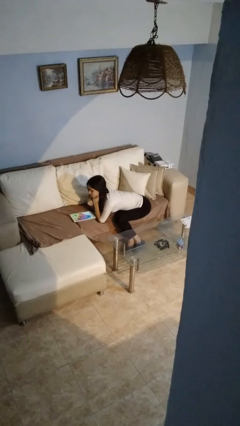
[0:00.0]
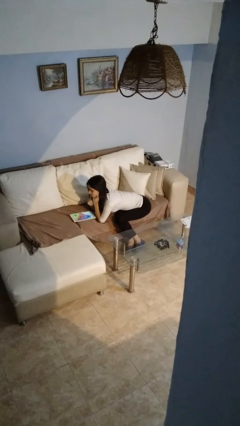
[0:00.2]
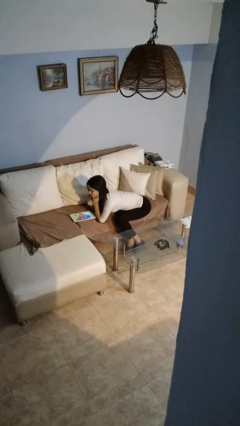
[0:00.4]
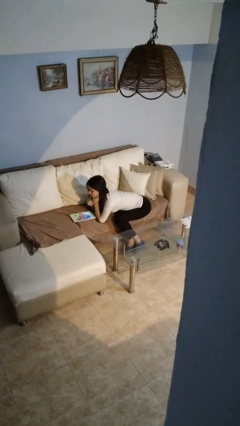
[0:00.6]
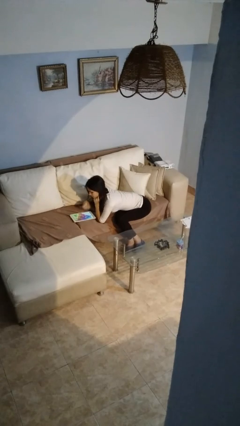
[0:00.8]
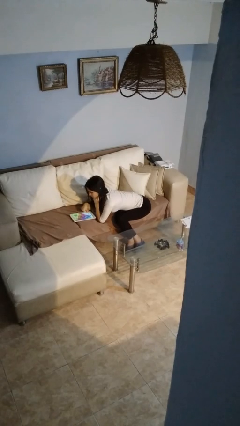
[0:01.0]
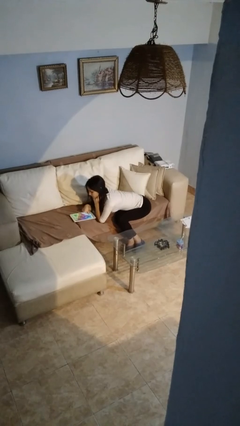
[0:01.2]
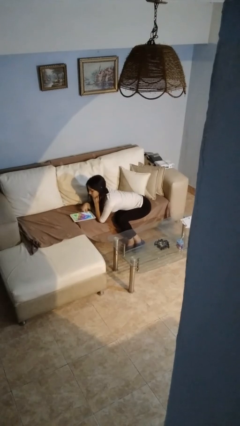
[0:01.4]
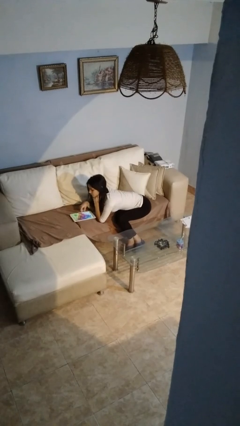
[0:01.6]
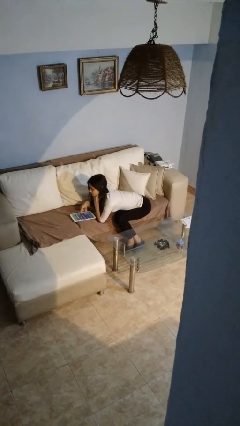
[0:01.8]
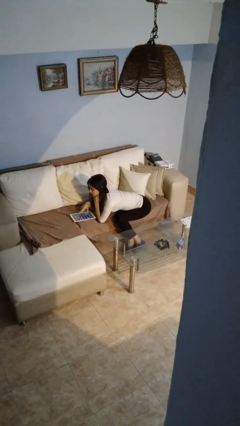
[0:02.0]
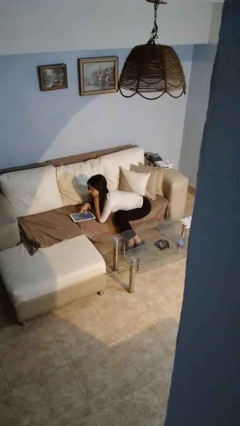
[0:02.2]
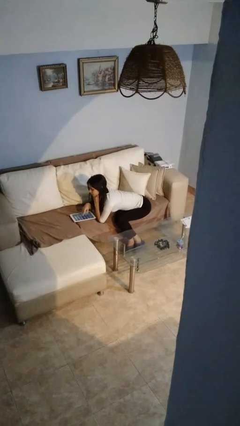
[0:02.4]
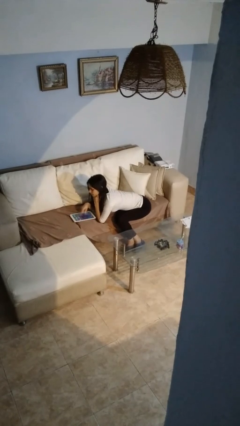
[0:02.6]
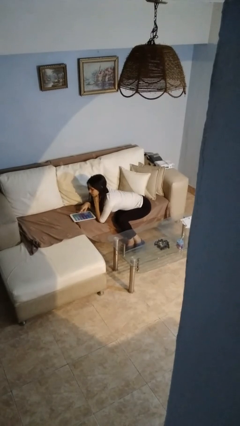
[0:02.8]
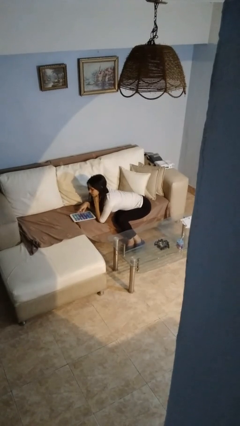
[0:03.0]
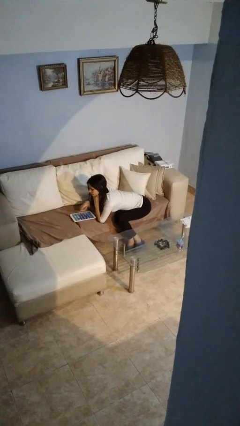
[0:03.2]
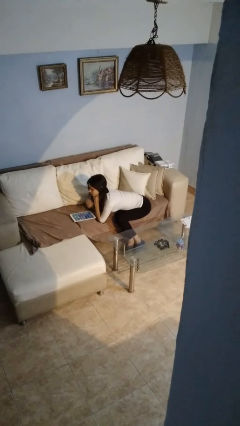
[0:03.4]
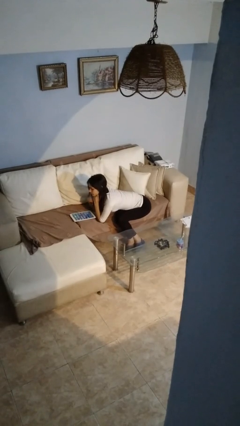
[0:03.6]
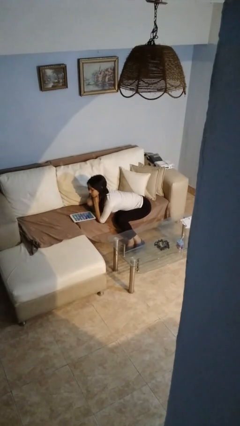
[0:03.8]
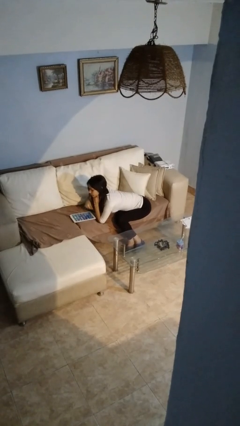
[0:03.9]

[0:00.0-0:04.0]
person interacts with tablet

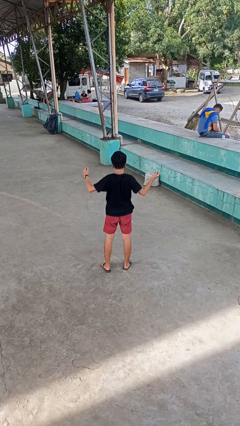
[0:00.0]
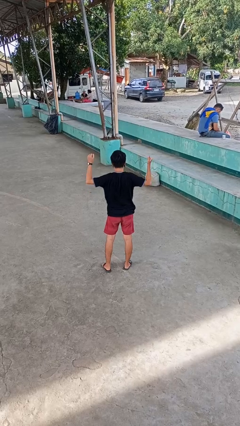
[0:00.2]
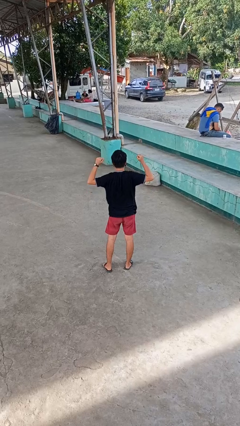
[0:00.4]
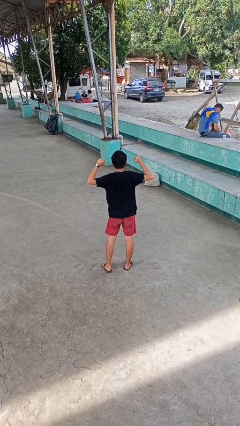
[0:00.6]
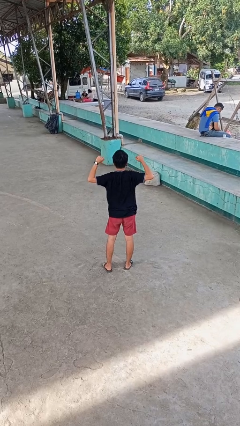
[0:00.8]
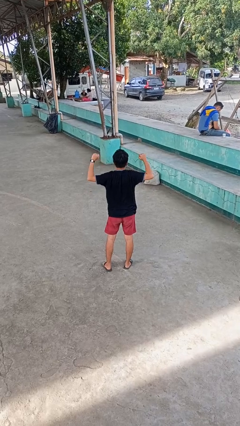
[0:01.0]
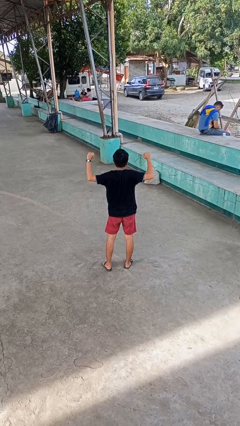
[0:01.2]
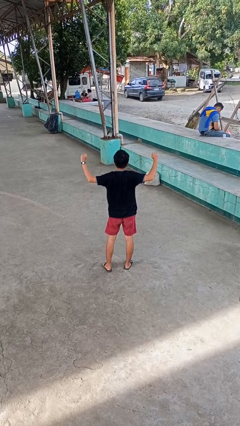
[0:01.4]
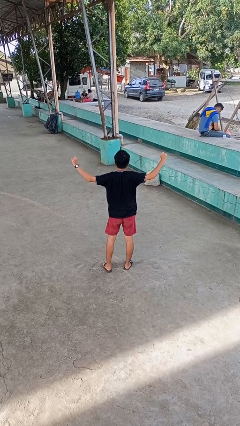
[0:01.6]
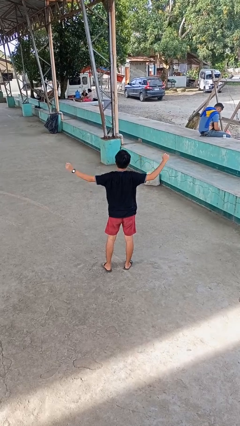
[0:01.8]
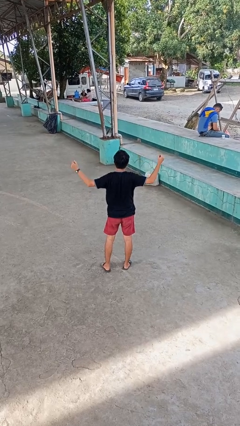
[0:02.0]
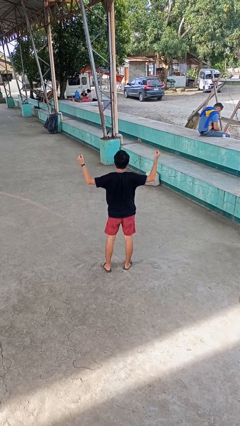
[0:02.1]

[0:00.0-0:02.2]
person stretches arms to side

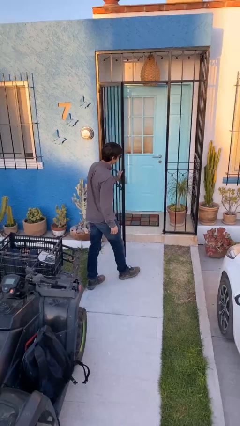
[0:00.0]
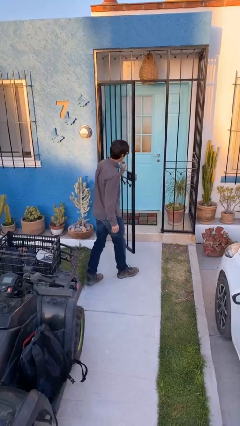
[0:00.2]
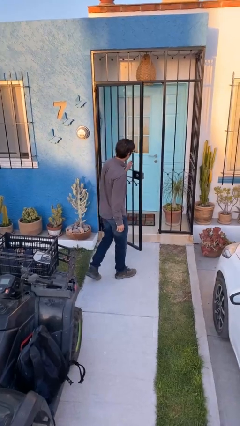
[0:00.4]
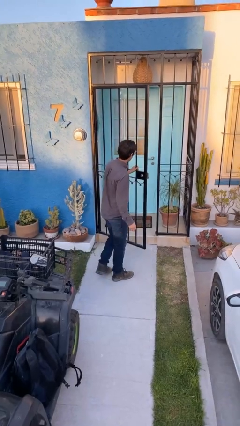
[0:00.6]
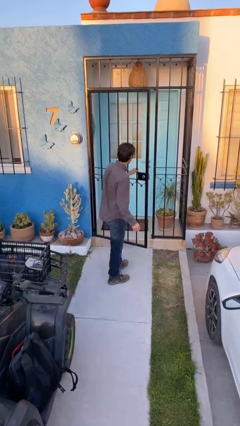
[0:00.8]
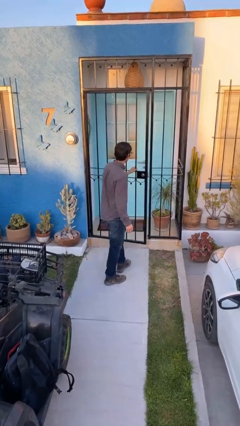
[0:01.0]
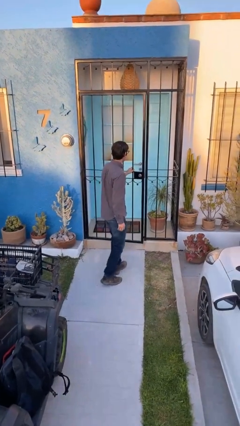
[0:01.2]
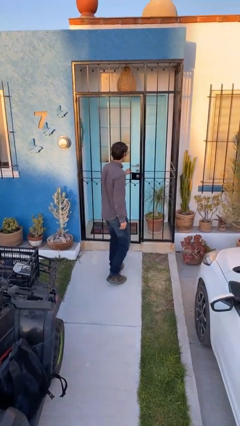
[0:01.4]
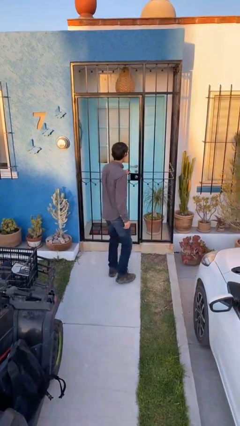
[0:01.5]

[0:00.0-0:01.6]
person closes facility door

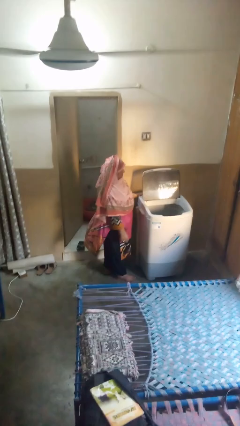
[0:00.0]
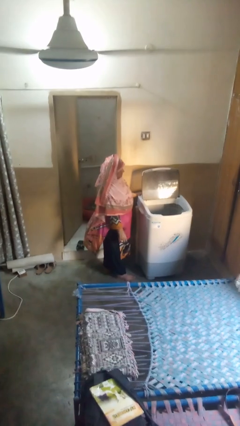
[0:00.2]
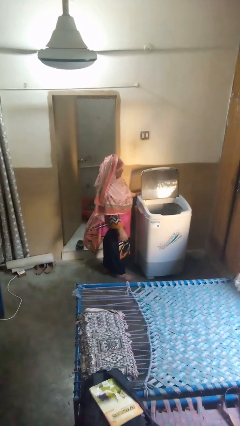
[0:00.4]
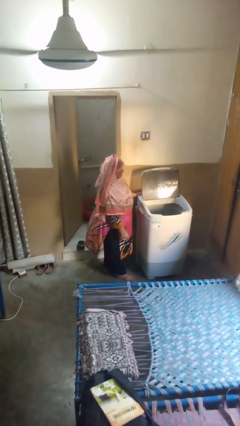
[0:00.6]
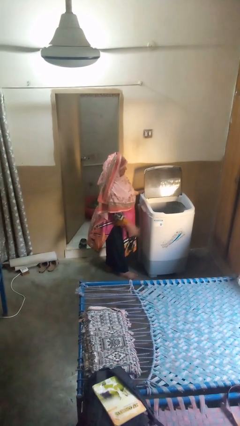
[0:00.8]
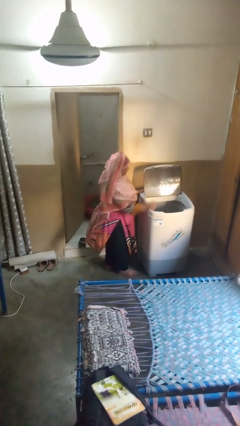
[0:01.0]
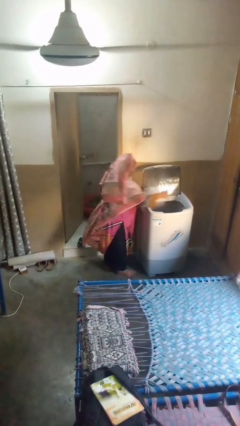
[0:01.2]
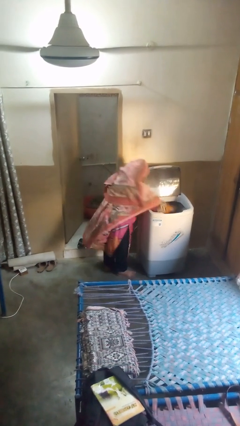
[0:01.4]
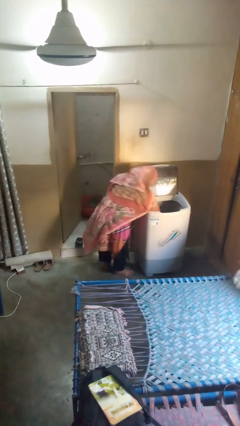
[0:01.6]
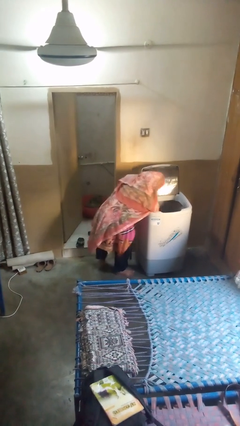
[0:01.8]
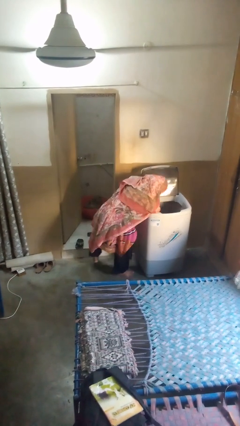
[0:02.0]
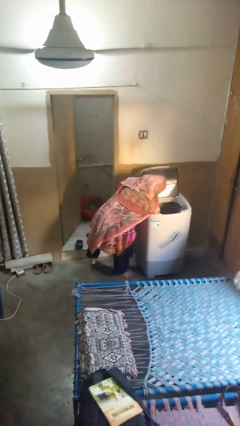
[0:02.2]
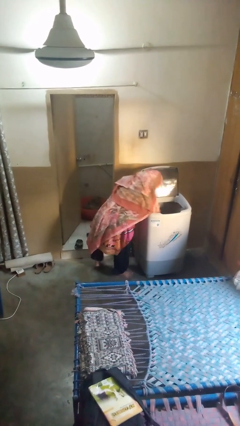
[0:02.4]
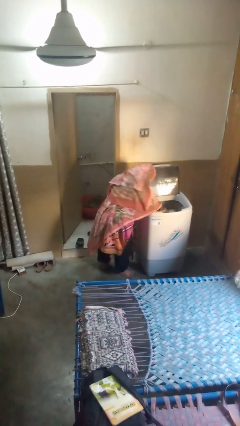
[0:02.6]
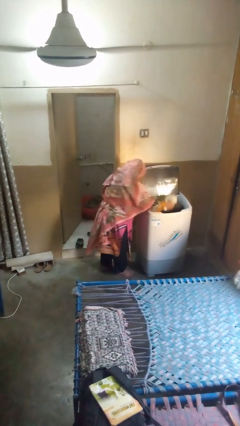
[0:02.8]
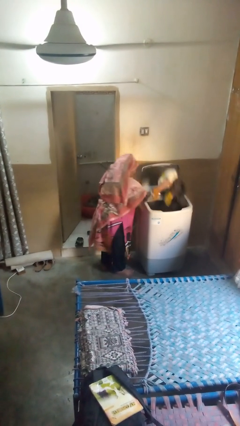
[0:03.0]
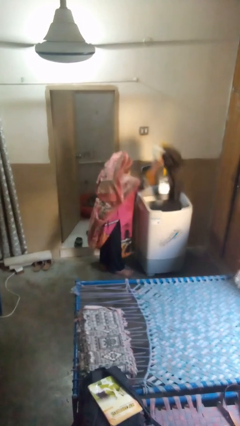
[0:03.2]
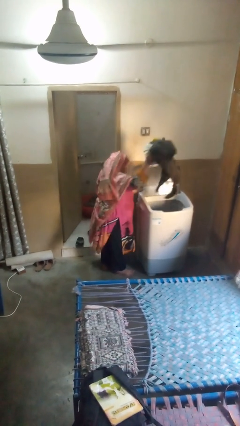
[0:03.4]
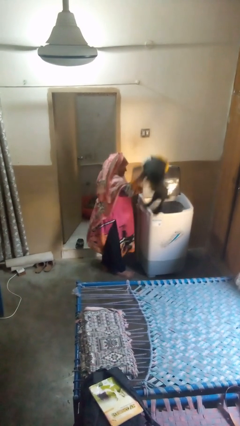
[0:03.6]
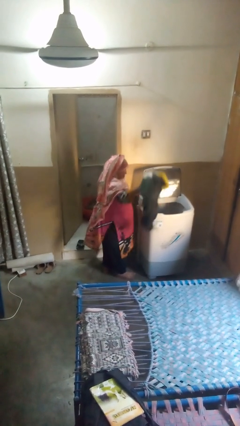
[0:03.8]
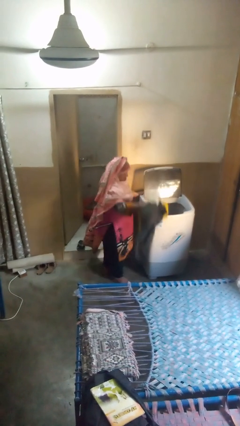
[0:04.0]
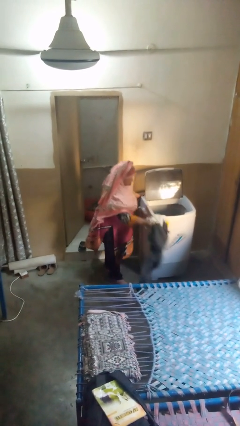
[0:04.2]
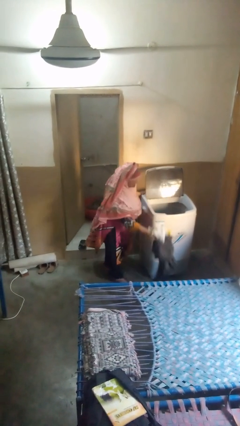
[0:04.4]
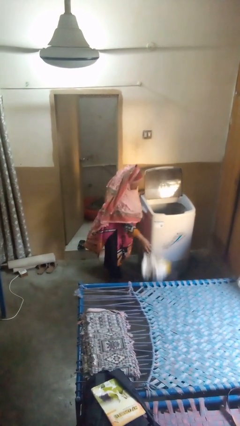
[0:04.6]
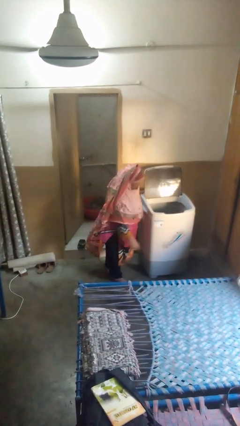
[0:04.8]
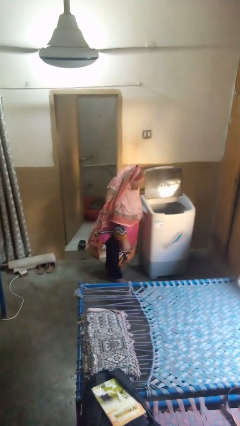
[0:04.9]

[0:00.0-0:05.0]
person unloads clotheswasher

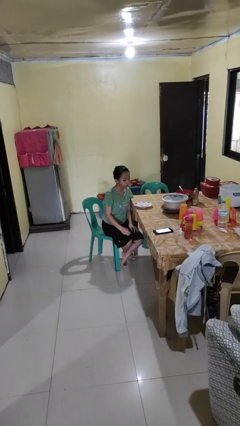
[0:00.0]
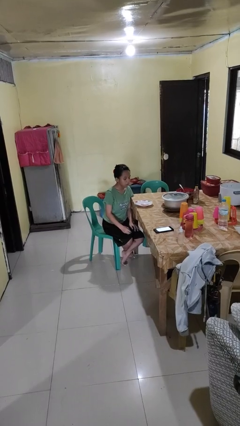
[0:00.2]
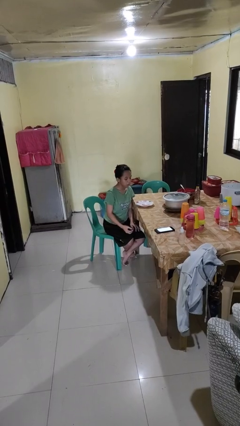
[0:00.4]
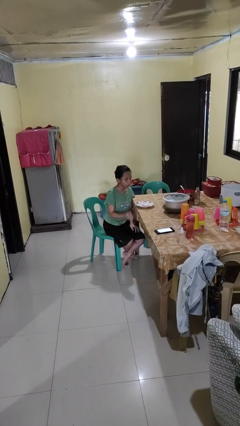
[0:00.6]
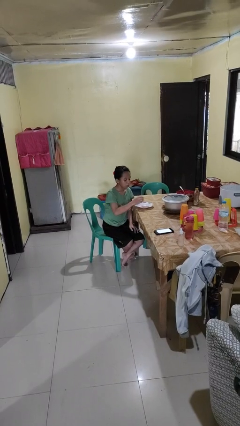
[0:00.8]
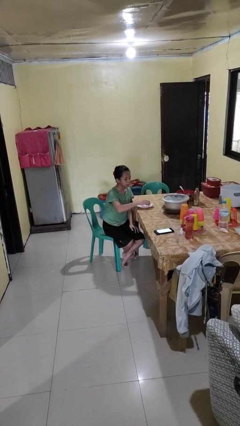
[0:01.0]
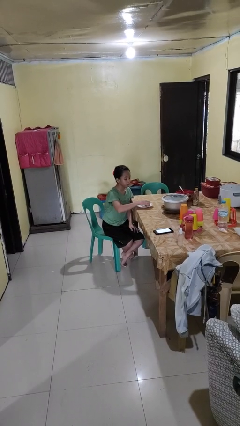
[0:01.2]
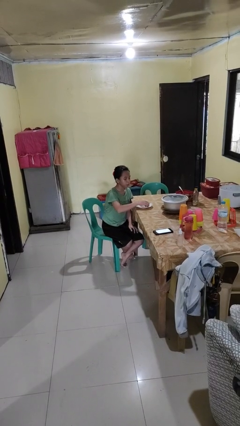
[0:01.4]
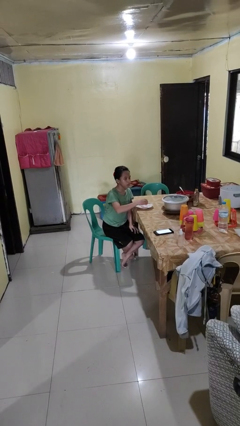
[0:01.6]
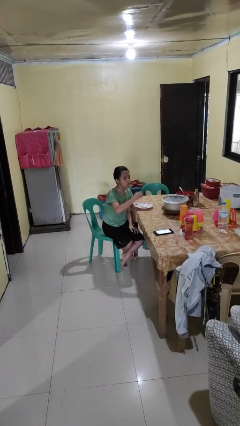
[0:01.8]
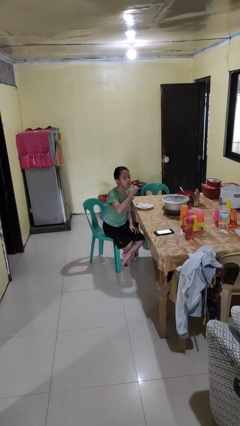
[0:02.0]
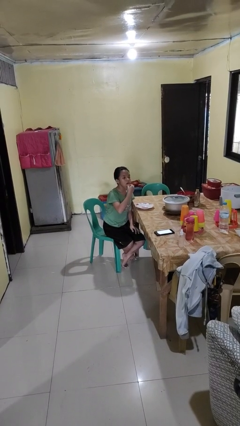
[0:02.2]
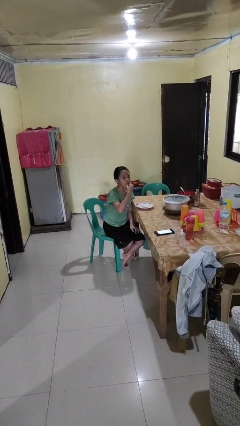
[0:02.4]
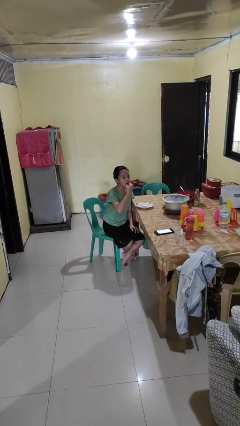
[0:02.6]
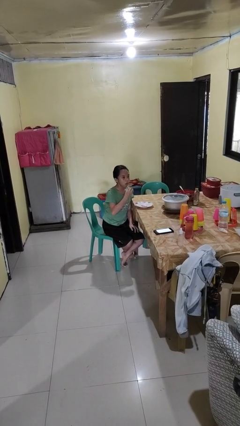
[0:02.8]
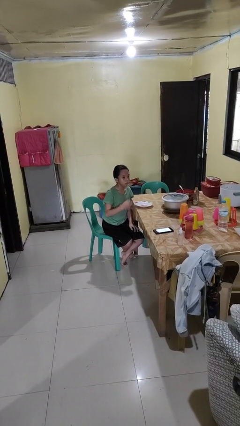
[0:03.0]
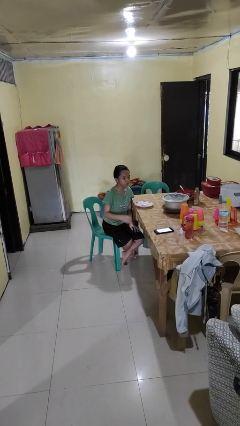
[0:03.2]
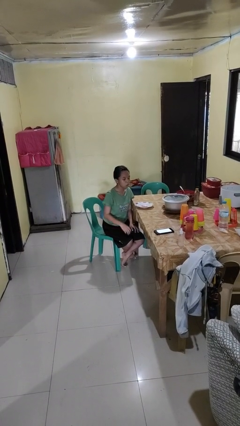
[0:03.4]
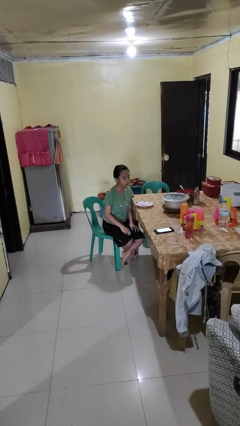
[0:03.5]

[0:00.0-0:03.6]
person eats with hands

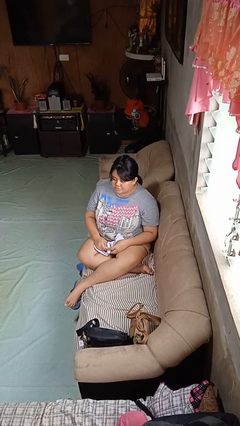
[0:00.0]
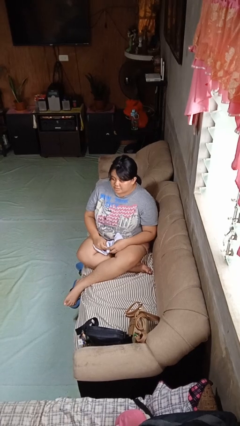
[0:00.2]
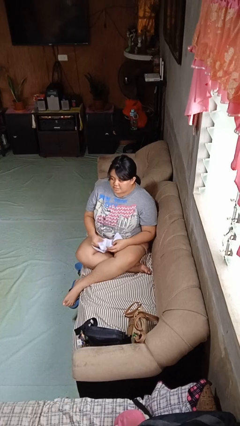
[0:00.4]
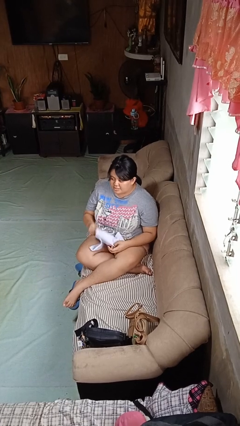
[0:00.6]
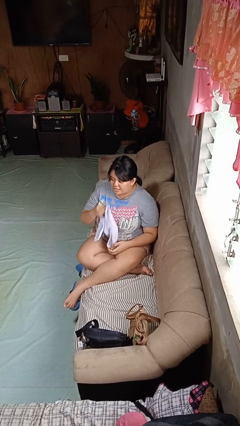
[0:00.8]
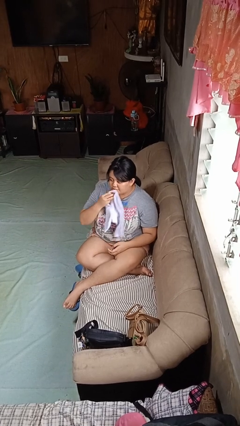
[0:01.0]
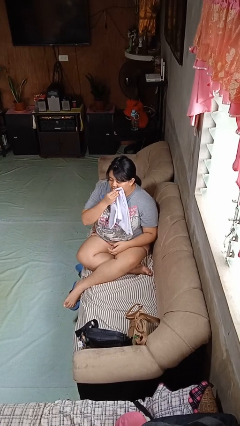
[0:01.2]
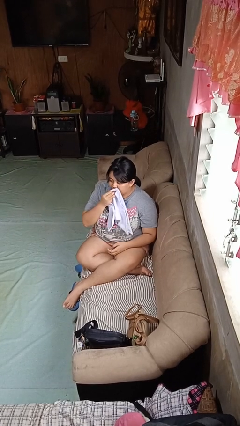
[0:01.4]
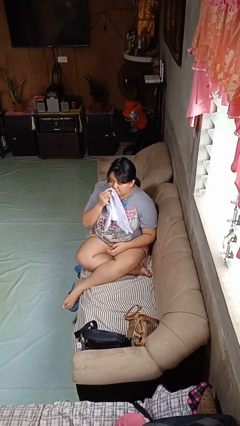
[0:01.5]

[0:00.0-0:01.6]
person wipes mouth with napkin
